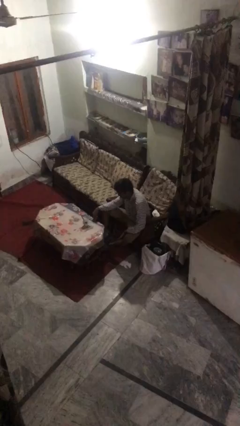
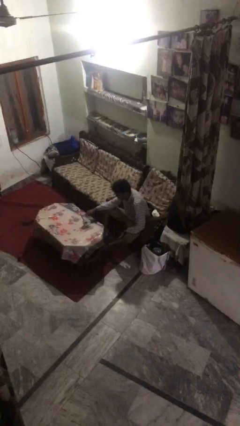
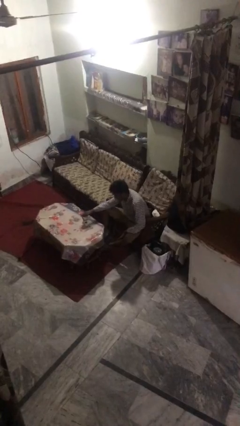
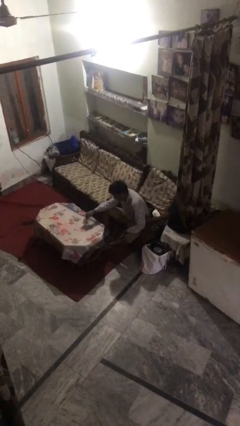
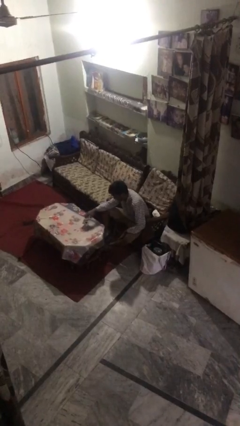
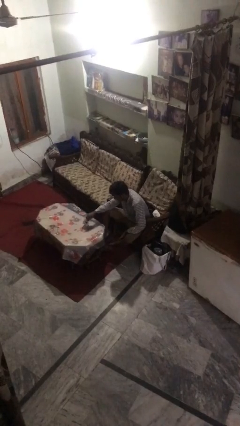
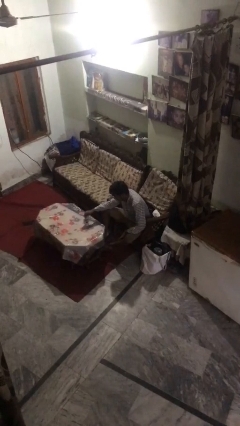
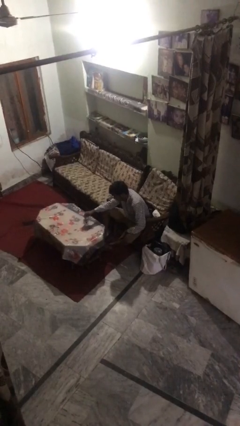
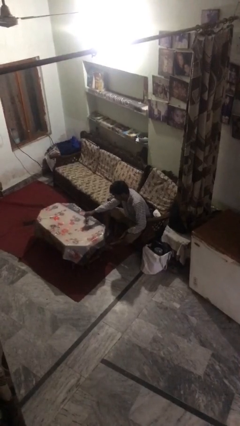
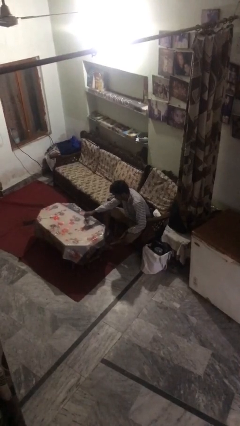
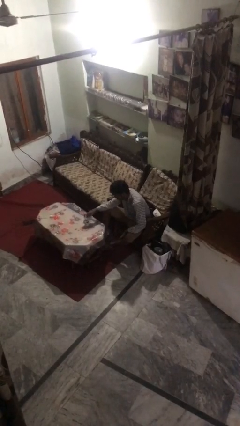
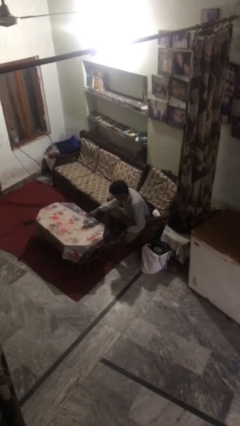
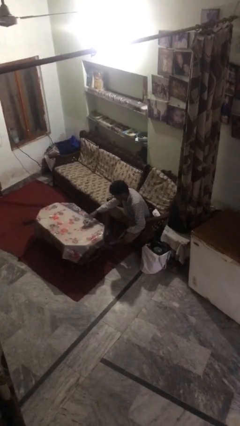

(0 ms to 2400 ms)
person stirs mug

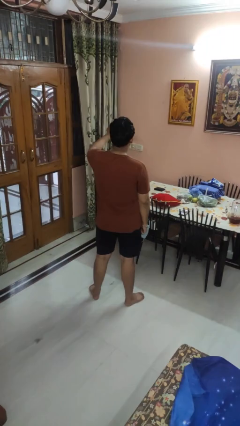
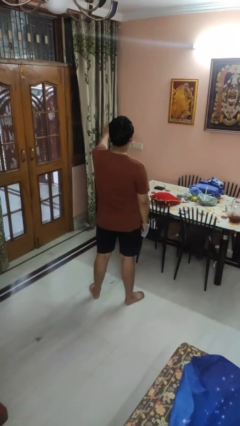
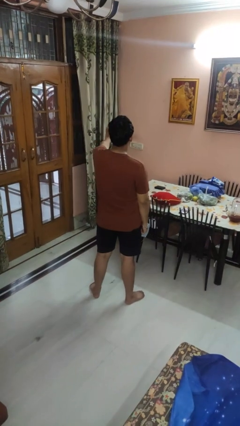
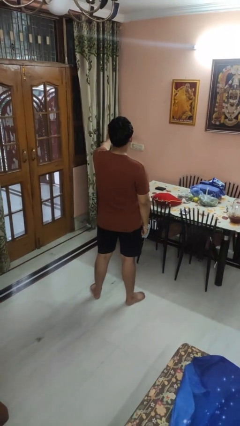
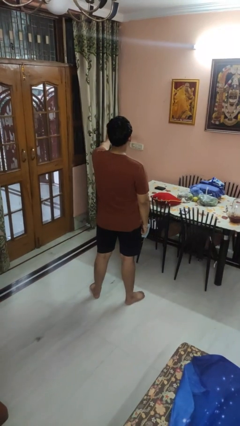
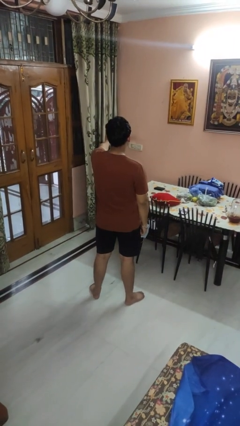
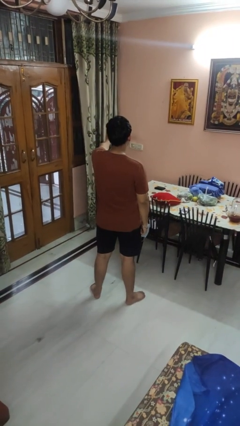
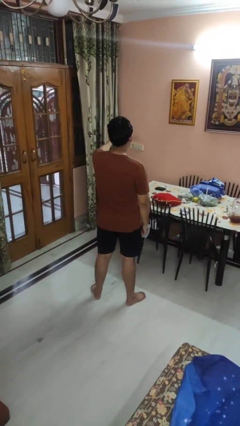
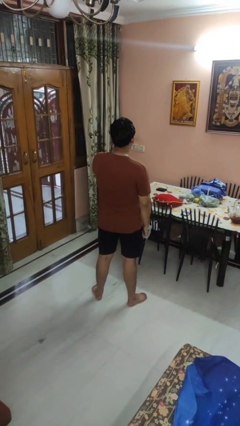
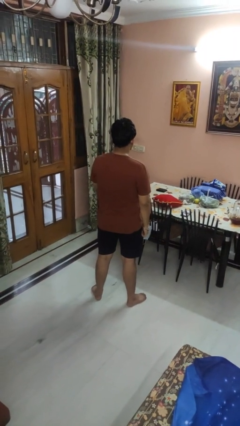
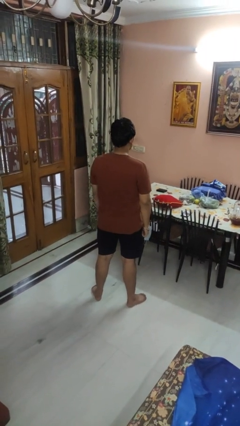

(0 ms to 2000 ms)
person gestures stop

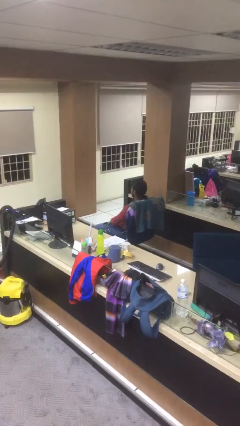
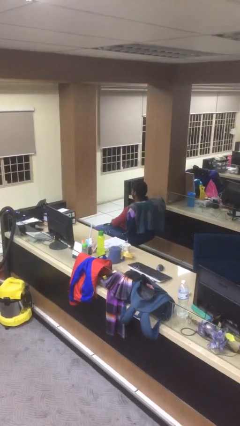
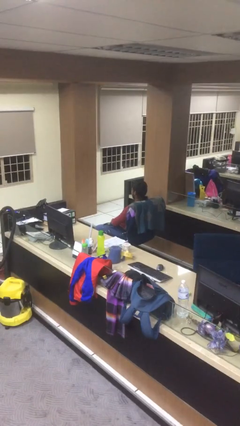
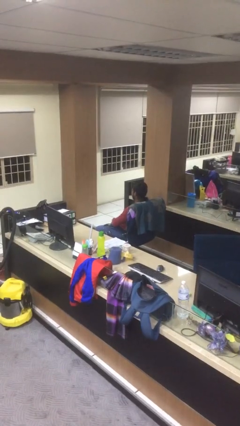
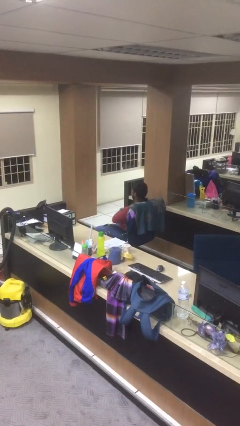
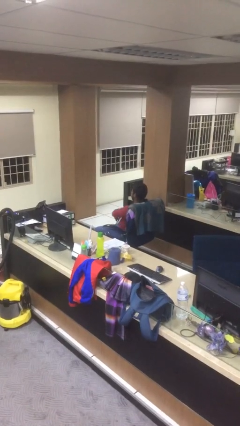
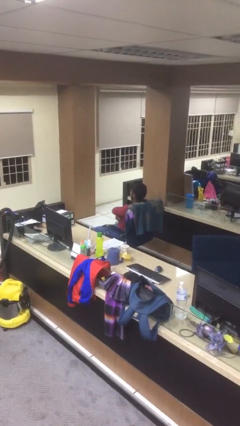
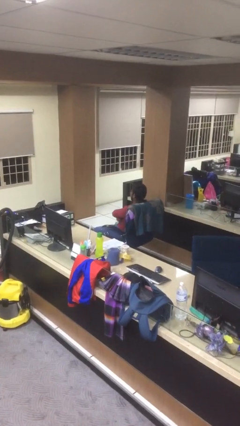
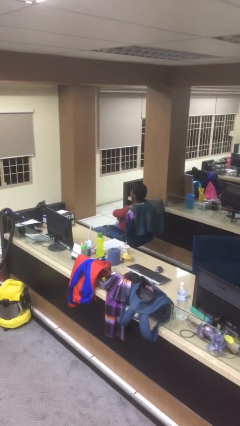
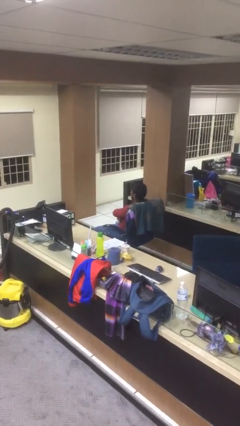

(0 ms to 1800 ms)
person crosses arms

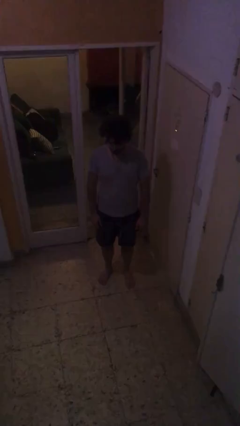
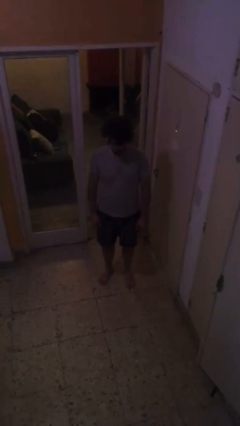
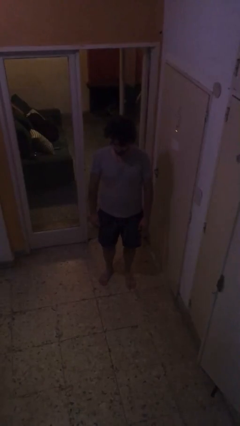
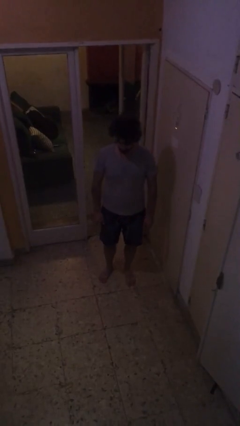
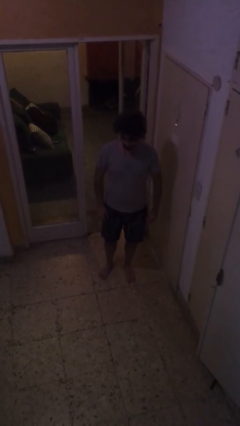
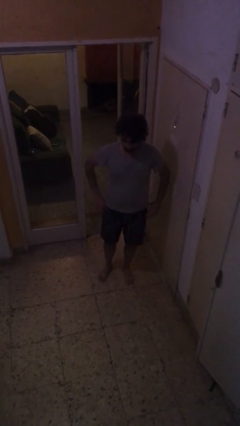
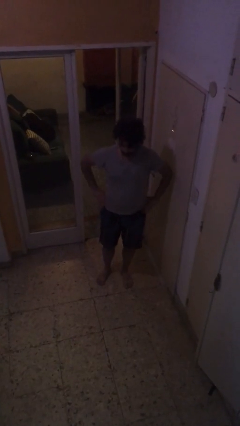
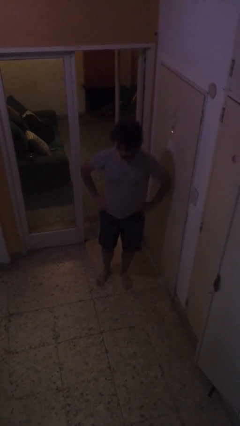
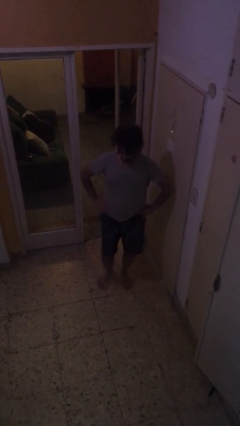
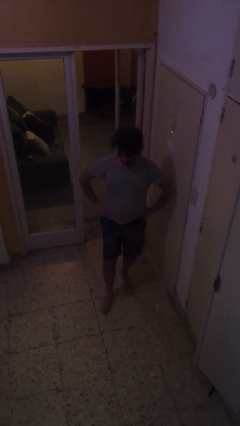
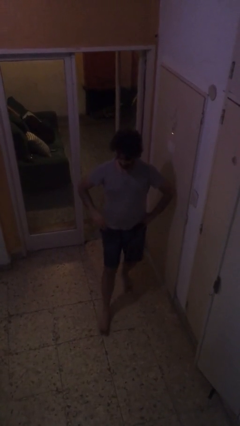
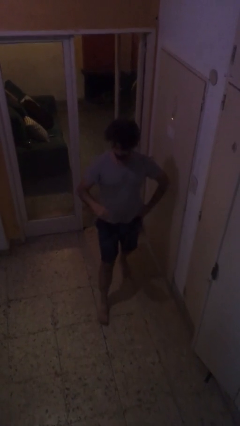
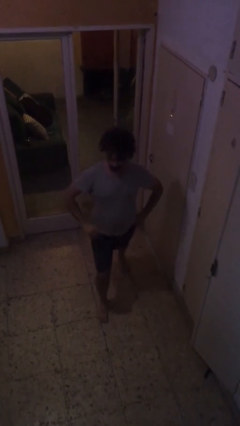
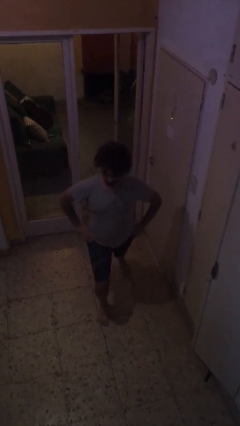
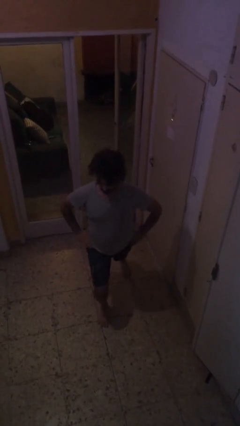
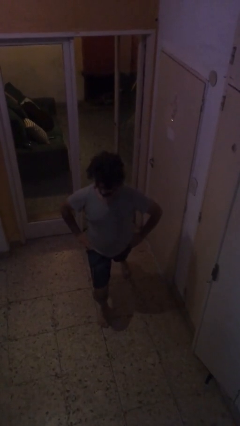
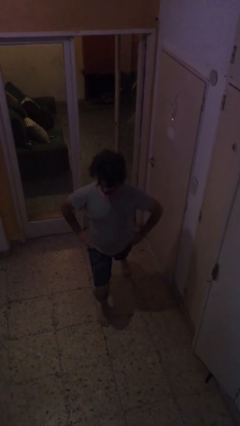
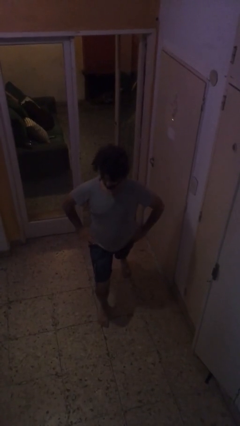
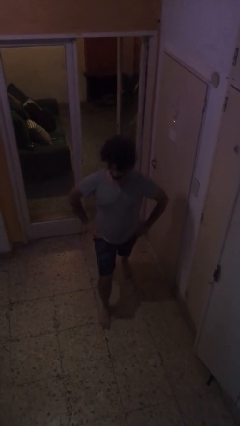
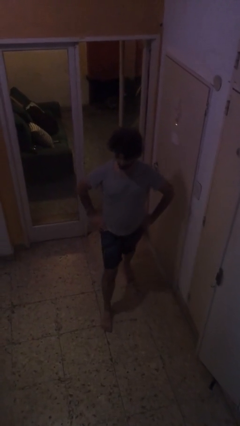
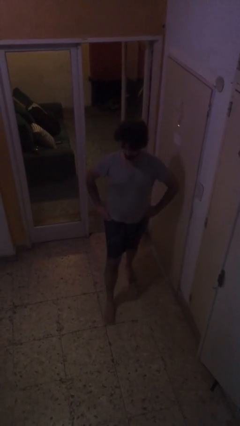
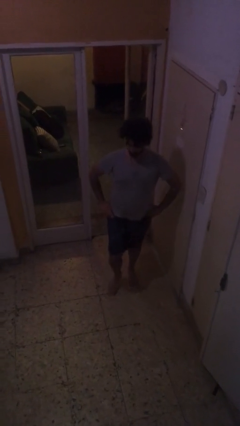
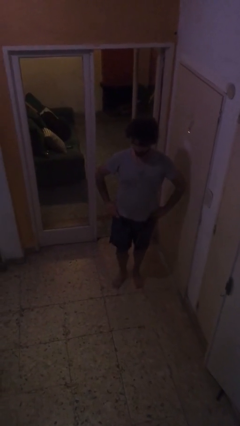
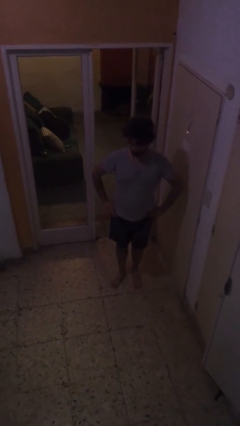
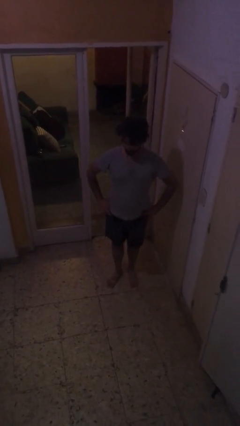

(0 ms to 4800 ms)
person exercises with lunges

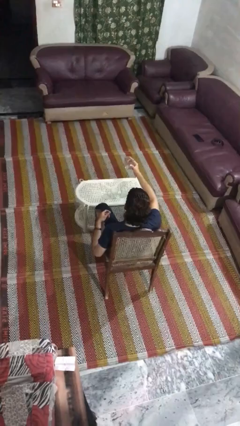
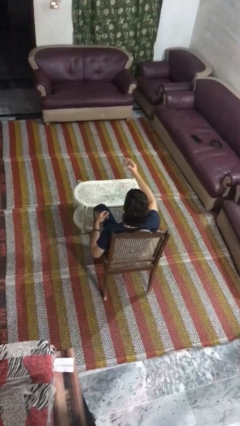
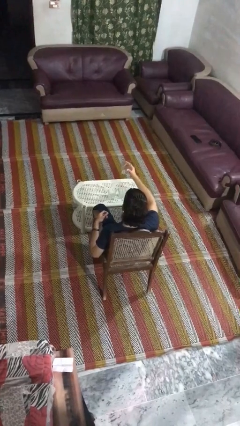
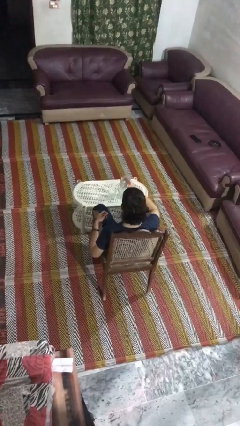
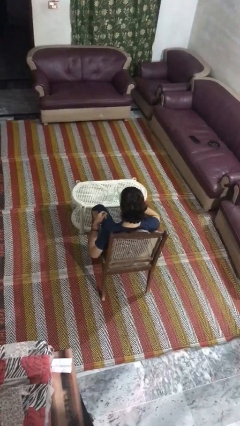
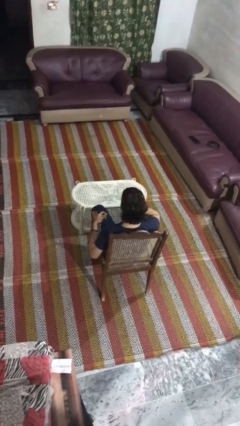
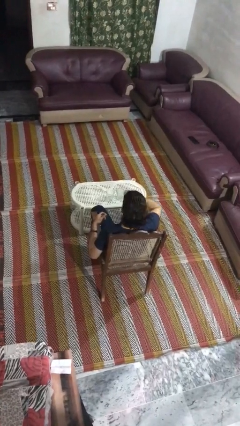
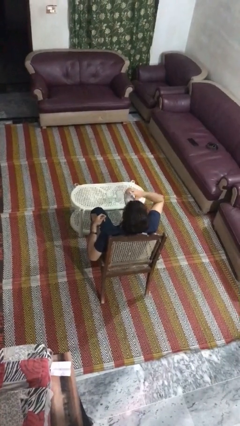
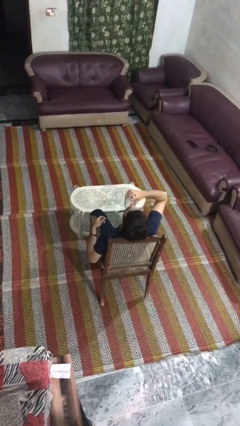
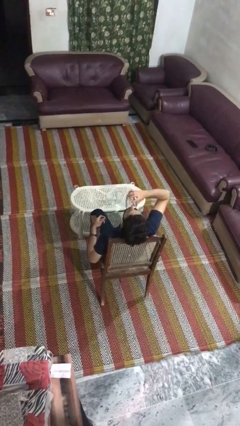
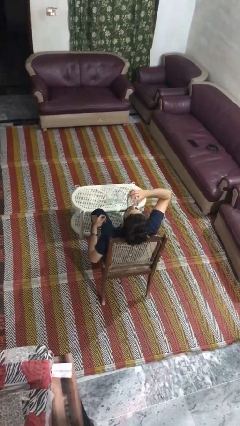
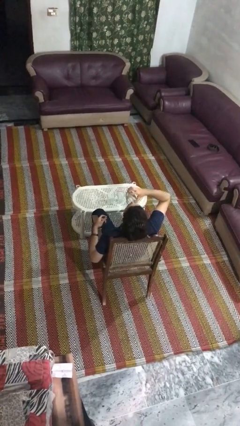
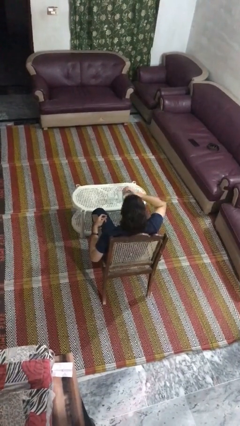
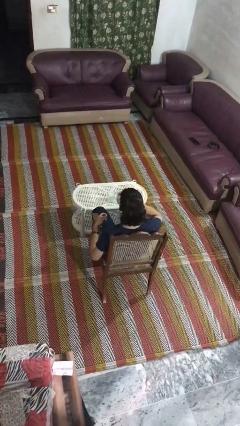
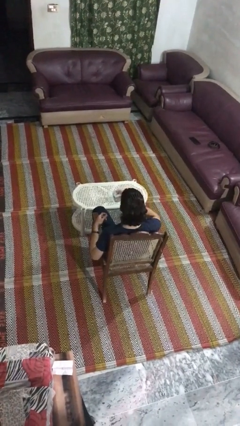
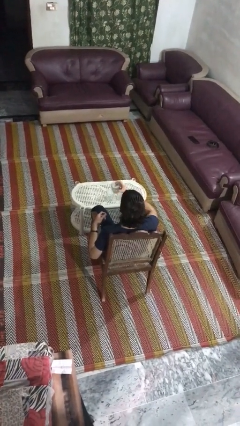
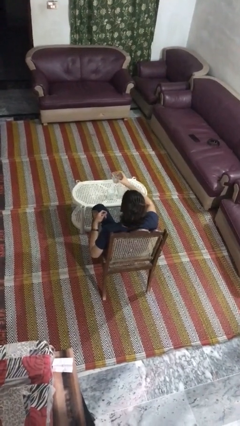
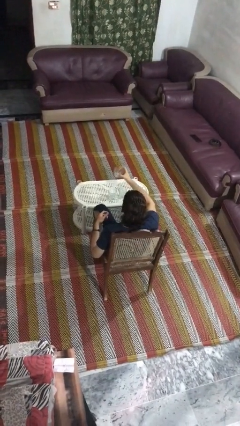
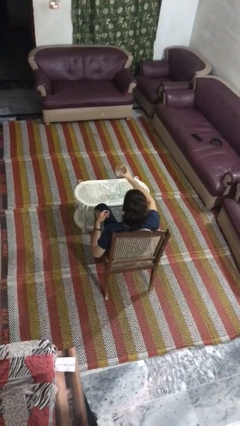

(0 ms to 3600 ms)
person drinks from shotglass

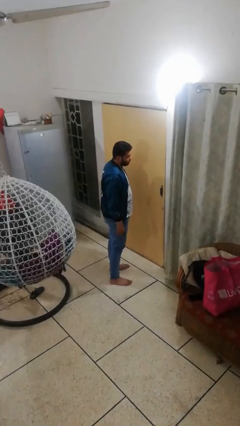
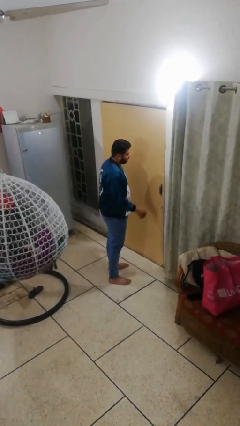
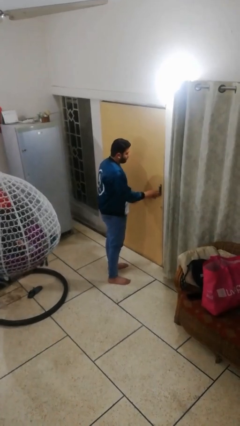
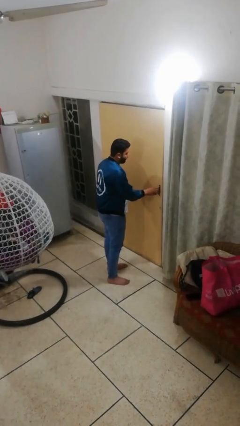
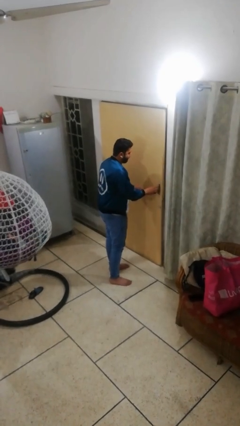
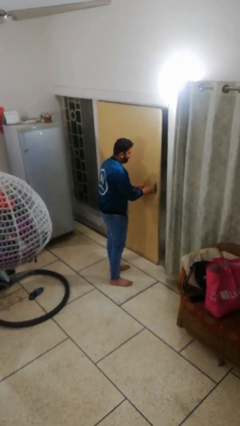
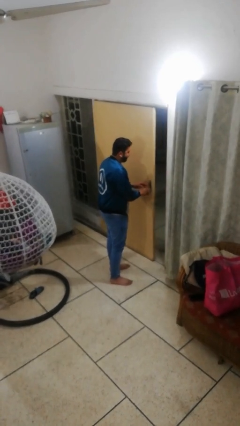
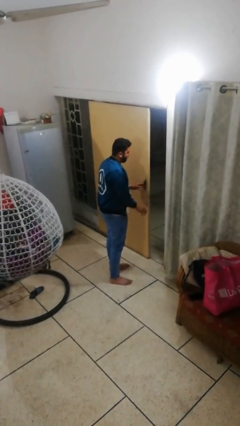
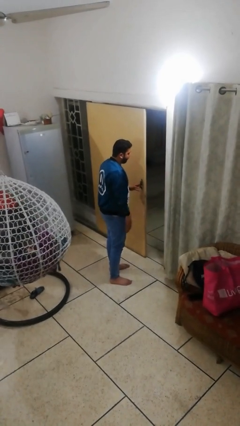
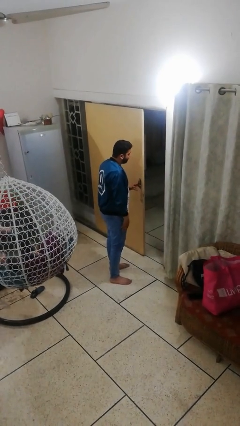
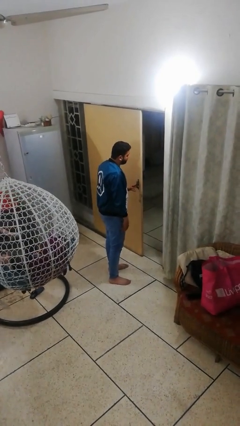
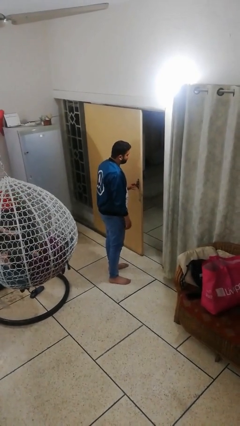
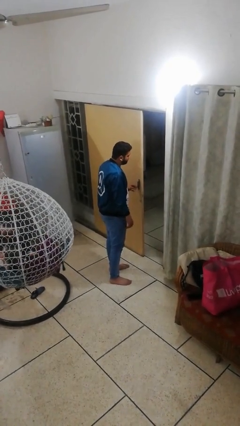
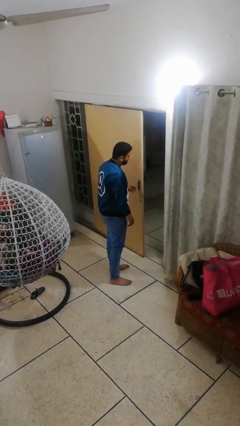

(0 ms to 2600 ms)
person opens facility door

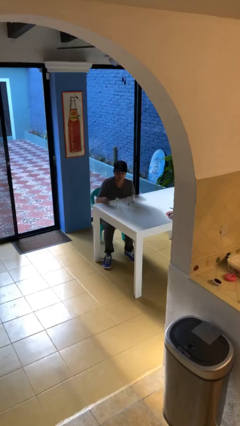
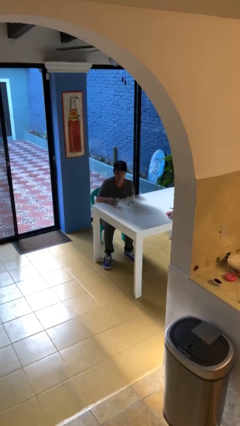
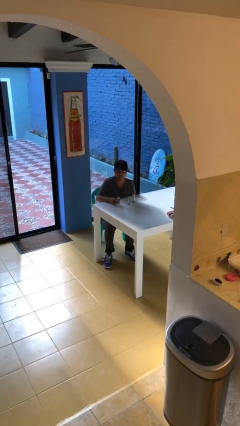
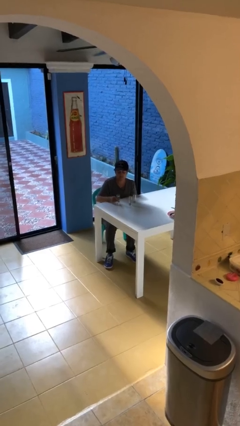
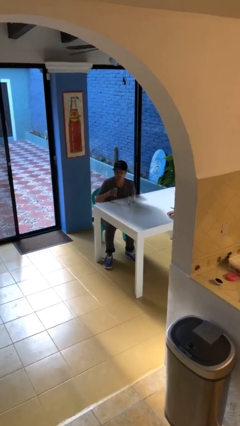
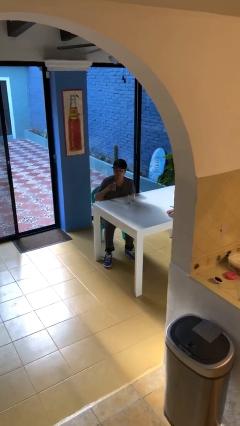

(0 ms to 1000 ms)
person picks up object from table
